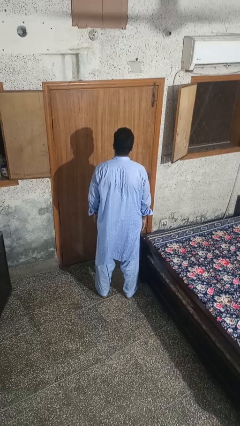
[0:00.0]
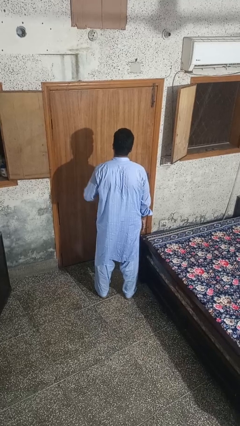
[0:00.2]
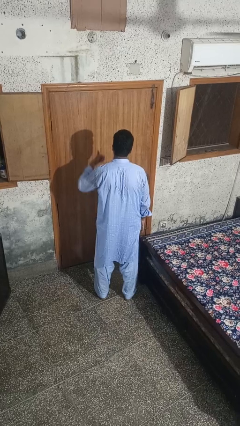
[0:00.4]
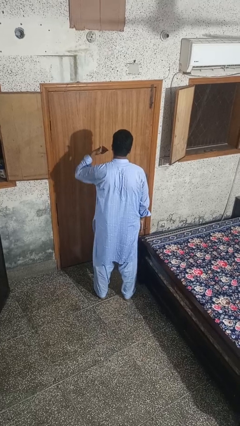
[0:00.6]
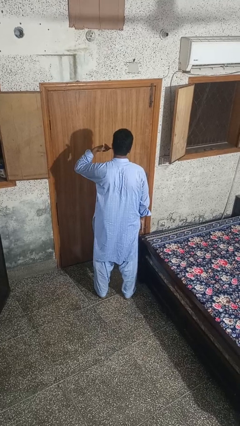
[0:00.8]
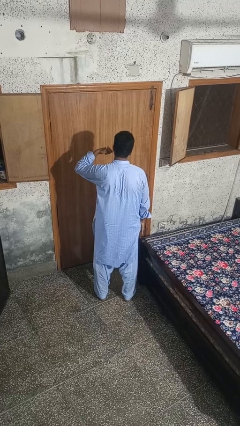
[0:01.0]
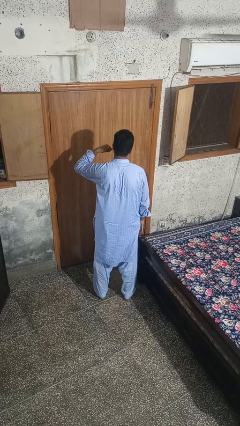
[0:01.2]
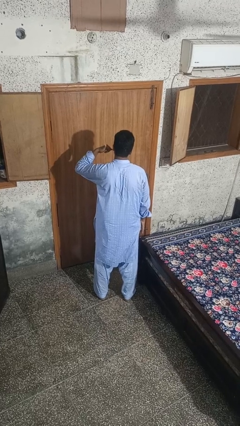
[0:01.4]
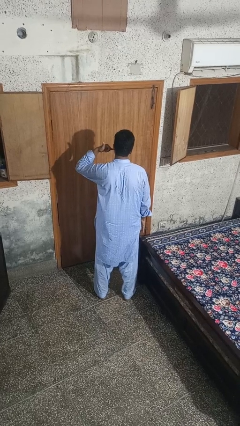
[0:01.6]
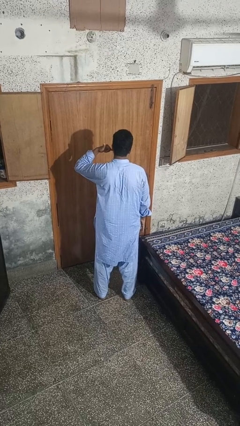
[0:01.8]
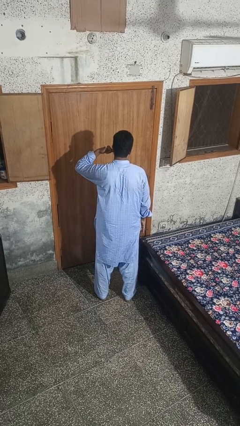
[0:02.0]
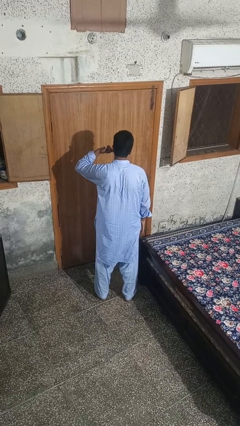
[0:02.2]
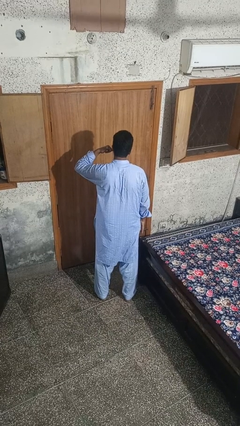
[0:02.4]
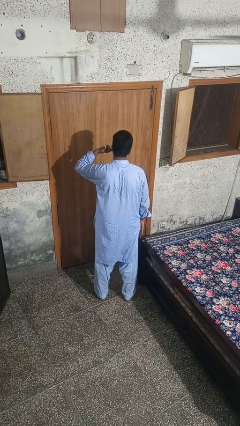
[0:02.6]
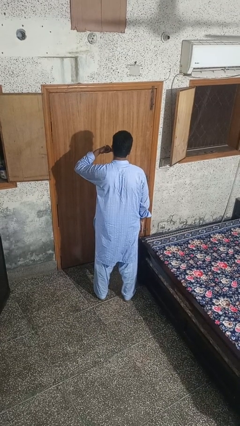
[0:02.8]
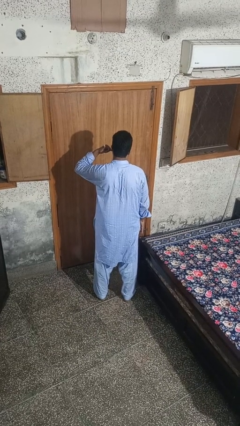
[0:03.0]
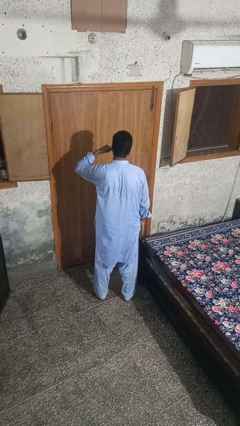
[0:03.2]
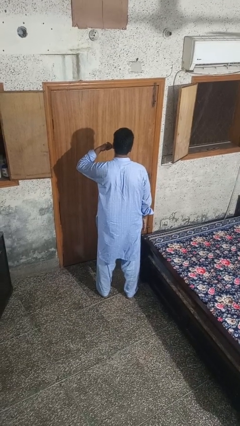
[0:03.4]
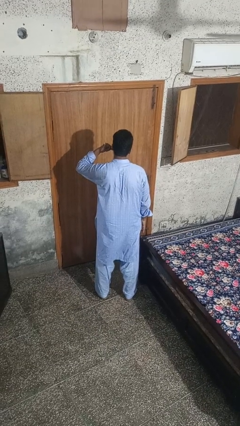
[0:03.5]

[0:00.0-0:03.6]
person gestures call me

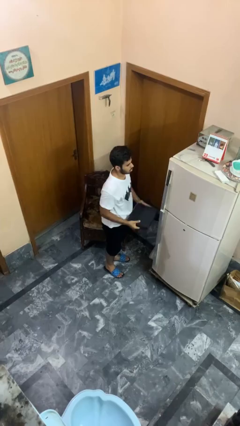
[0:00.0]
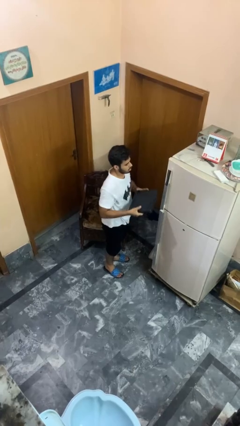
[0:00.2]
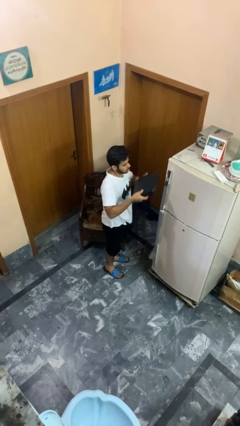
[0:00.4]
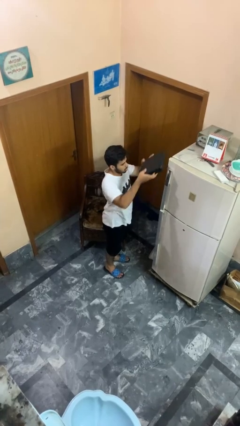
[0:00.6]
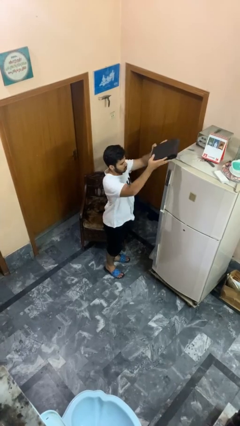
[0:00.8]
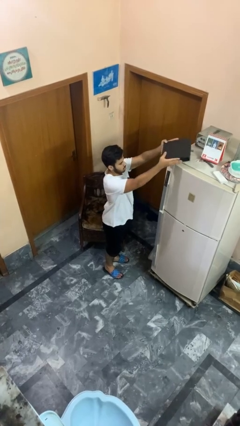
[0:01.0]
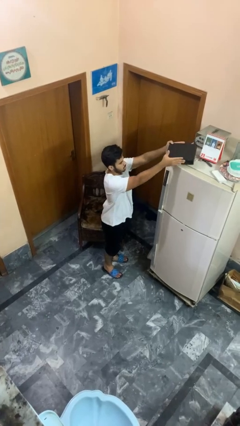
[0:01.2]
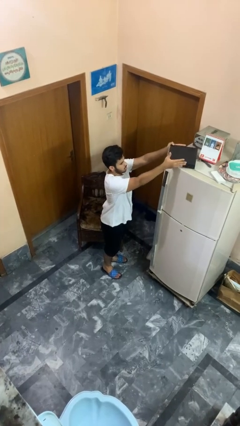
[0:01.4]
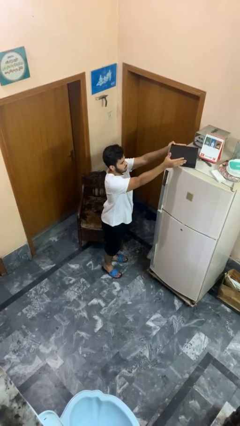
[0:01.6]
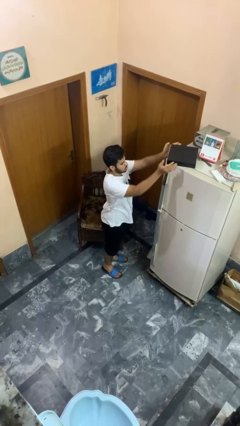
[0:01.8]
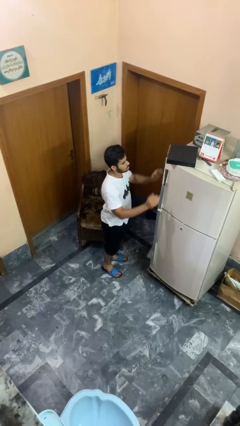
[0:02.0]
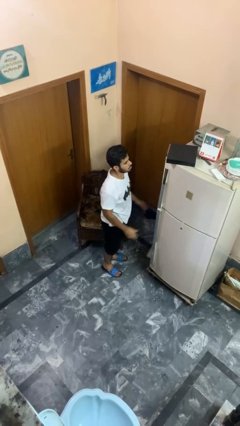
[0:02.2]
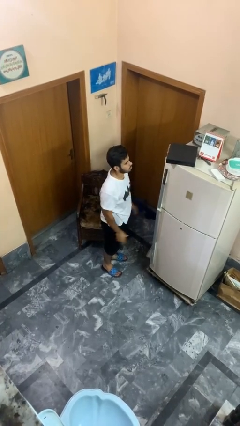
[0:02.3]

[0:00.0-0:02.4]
person puts down object on countertop

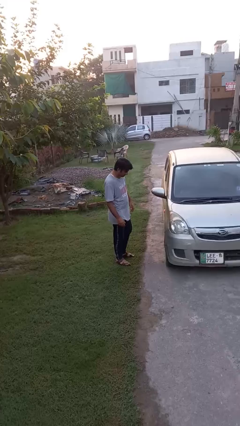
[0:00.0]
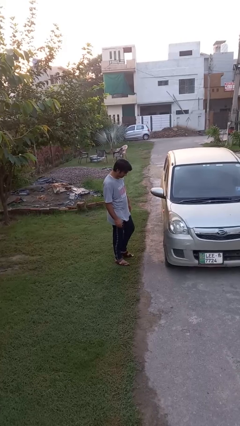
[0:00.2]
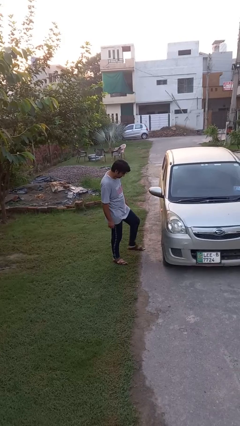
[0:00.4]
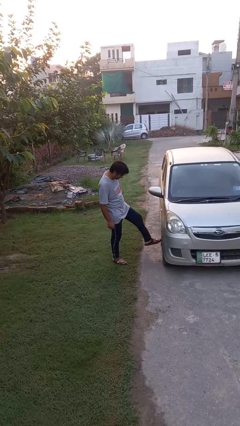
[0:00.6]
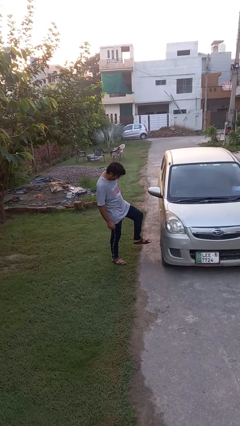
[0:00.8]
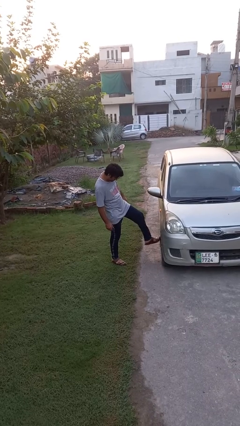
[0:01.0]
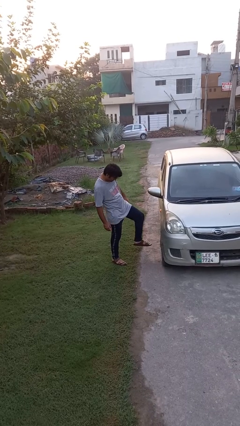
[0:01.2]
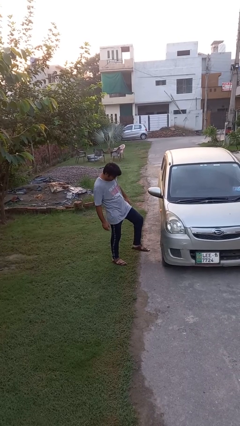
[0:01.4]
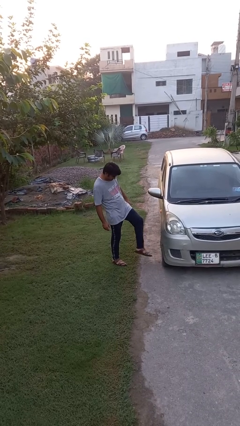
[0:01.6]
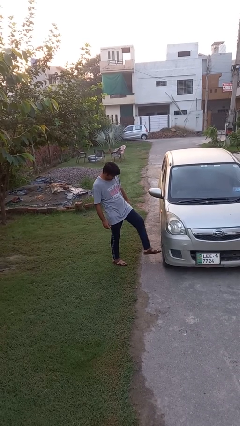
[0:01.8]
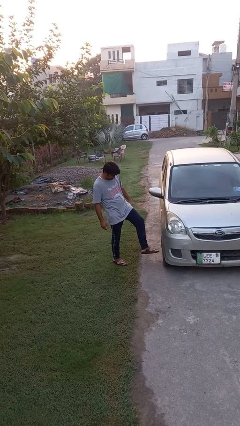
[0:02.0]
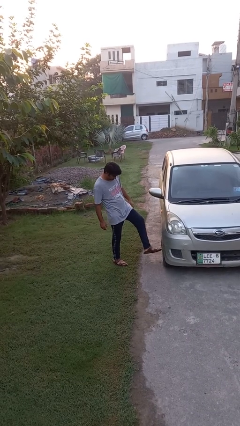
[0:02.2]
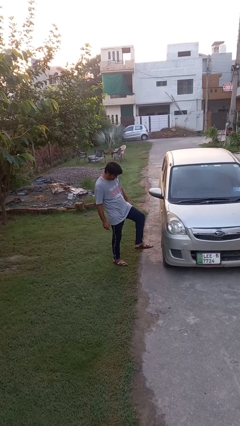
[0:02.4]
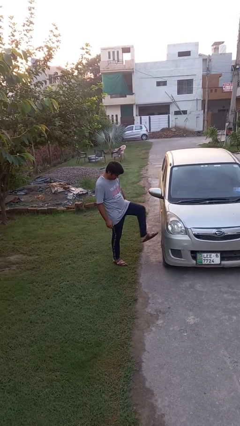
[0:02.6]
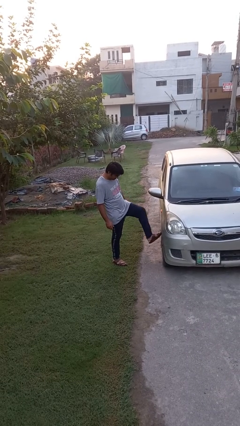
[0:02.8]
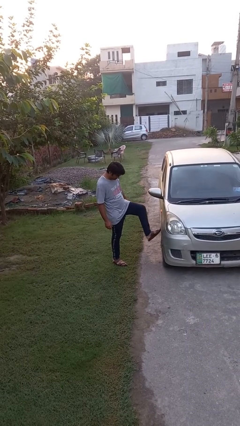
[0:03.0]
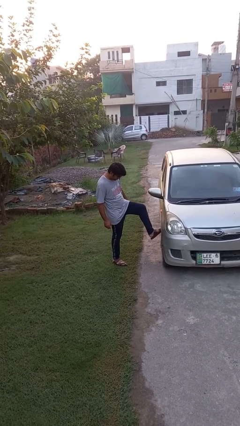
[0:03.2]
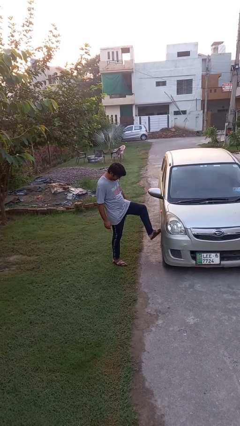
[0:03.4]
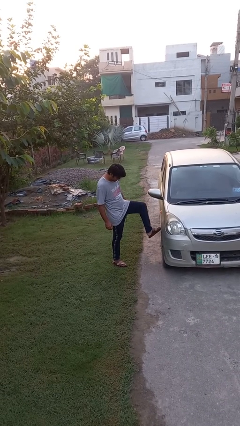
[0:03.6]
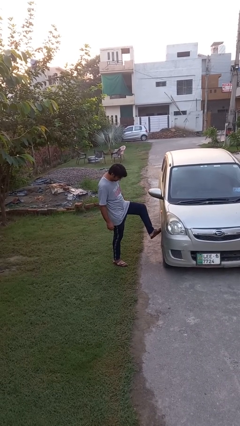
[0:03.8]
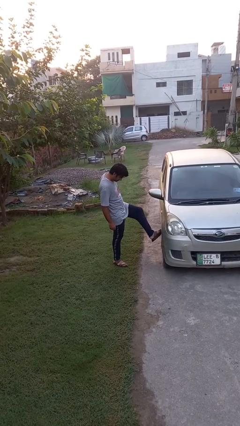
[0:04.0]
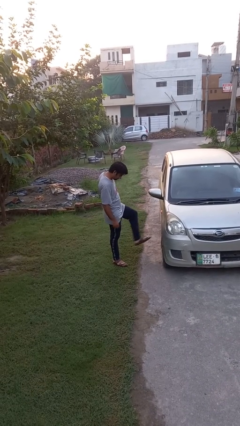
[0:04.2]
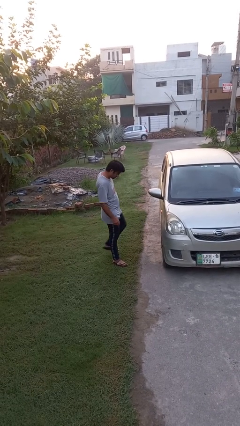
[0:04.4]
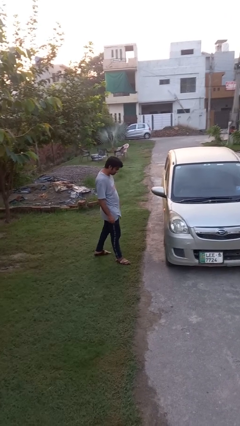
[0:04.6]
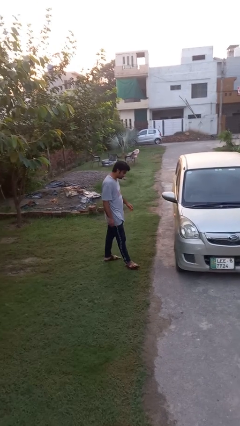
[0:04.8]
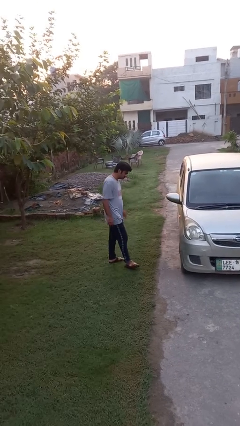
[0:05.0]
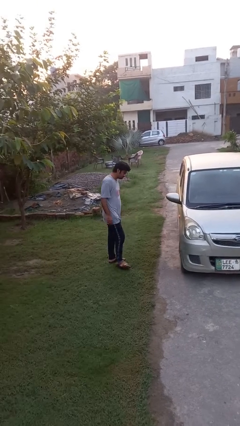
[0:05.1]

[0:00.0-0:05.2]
person kicks car tires

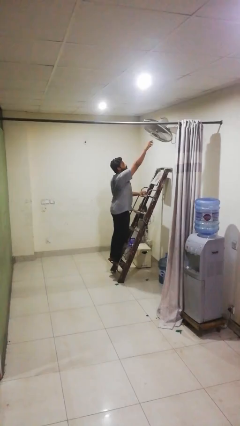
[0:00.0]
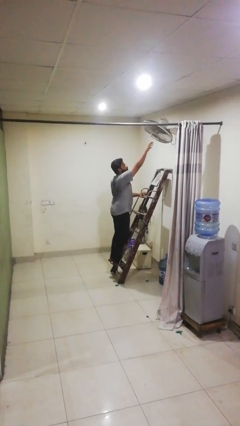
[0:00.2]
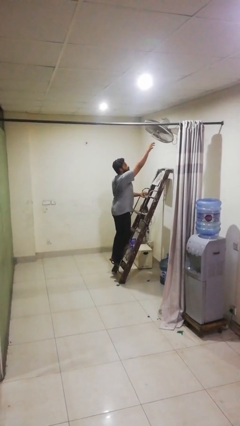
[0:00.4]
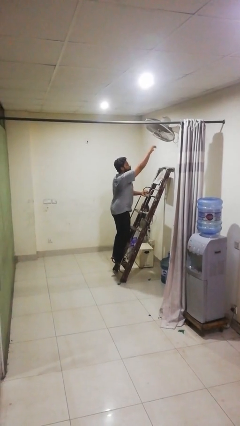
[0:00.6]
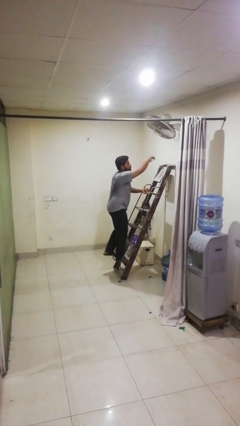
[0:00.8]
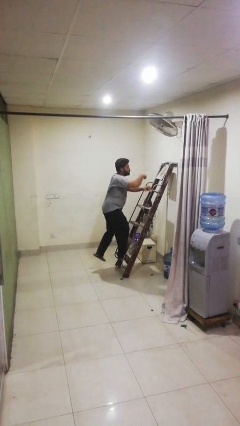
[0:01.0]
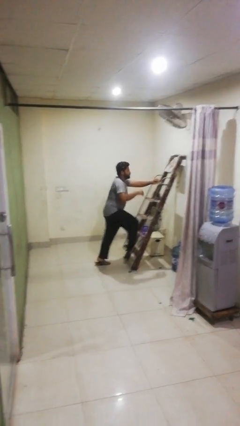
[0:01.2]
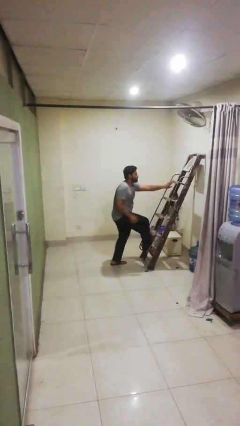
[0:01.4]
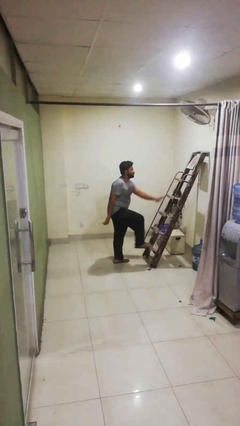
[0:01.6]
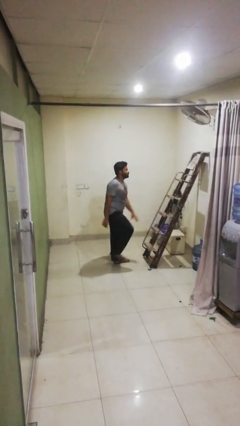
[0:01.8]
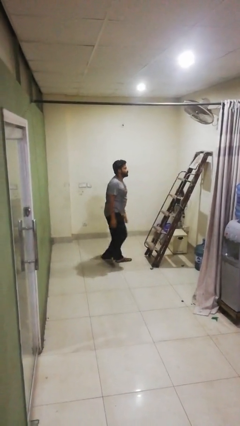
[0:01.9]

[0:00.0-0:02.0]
person climbs down ladder

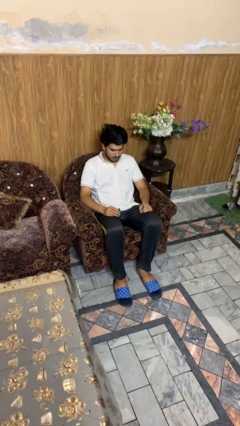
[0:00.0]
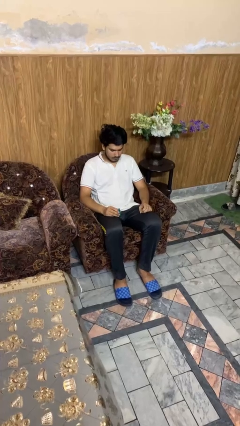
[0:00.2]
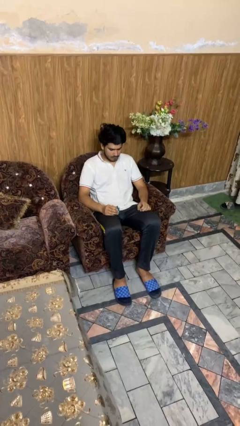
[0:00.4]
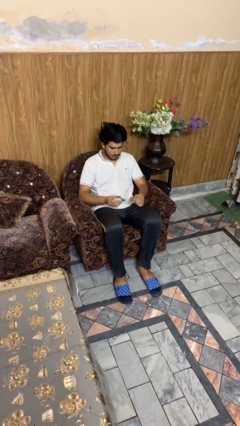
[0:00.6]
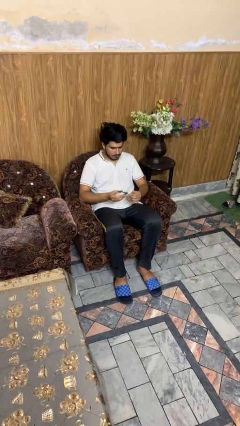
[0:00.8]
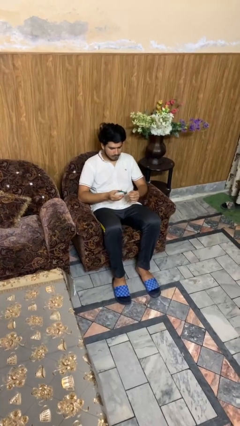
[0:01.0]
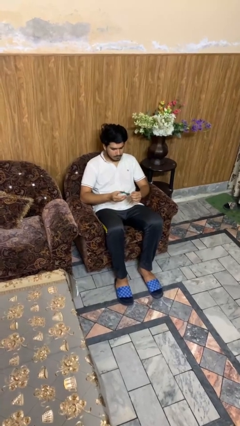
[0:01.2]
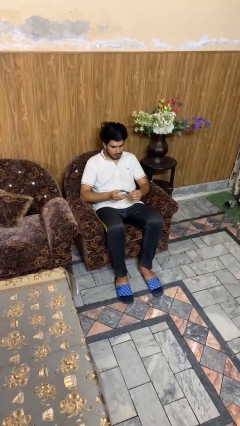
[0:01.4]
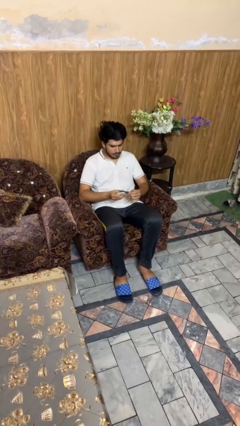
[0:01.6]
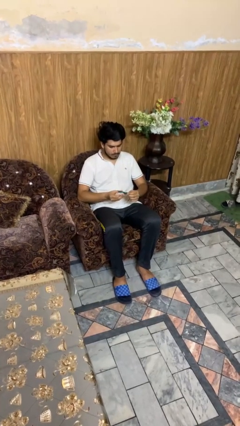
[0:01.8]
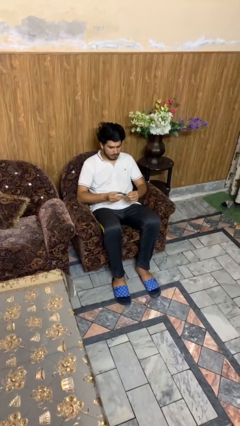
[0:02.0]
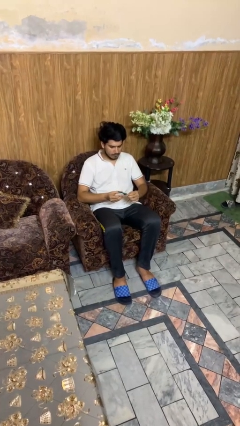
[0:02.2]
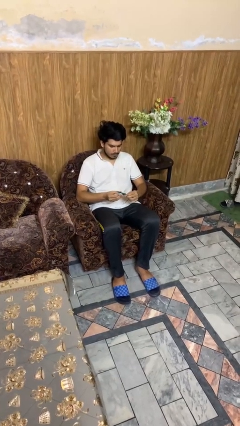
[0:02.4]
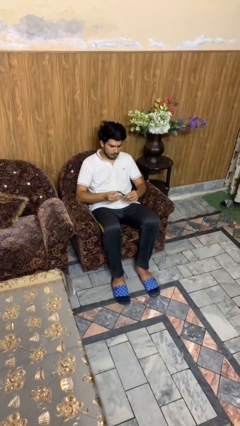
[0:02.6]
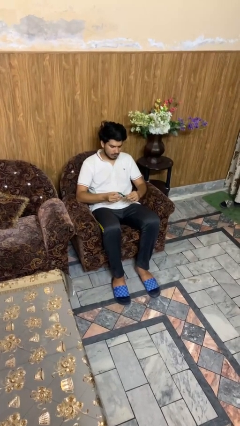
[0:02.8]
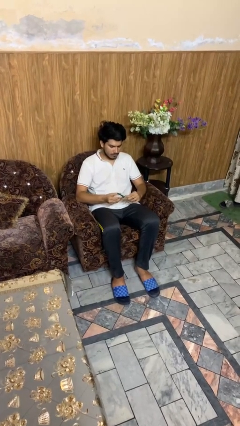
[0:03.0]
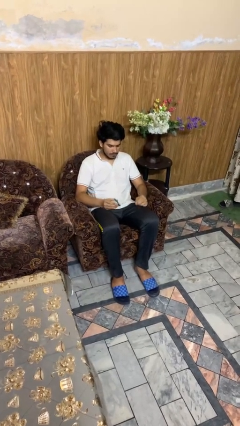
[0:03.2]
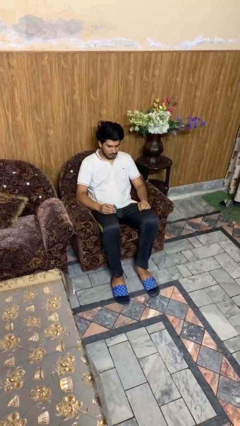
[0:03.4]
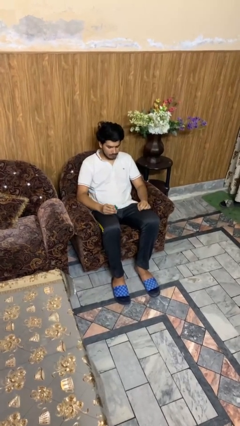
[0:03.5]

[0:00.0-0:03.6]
person clips fingernails

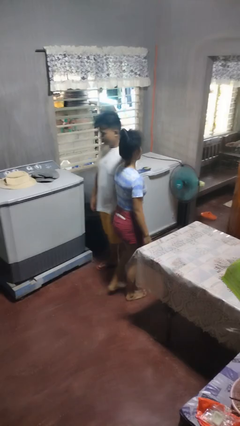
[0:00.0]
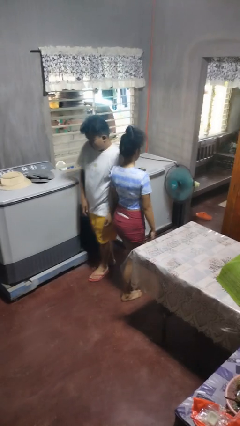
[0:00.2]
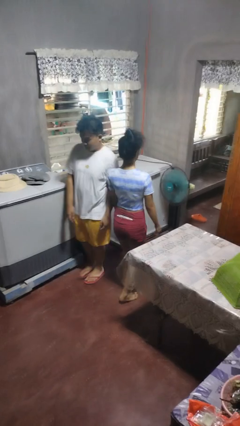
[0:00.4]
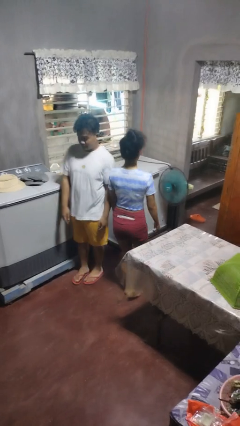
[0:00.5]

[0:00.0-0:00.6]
person bumps into person
